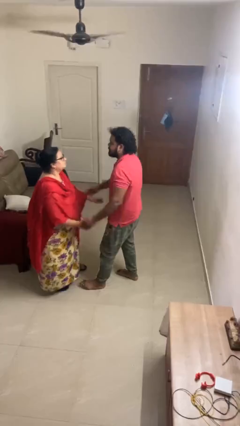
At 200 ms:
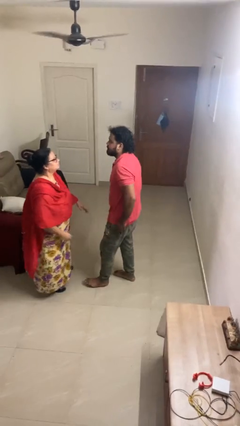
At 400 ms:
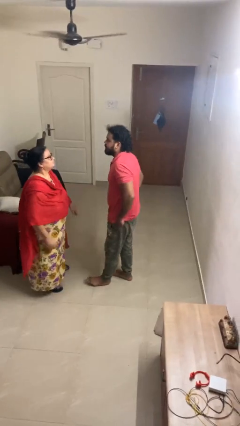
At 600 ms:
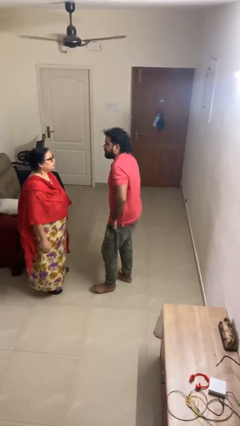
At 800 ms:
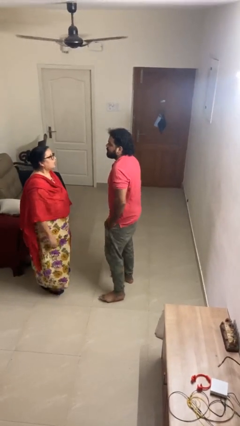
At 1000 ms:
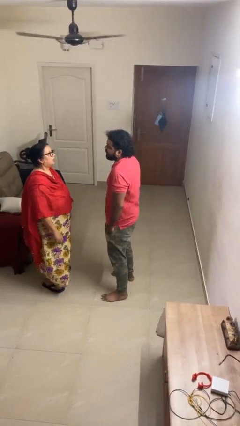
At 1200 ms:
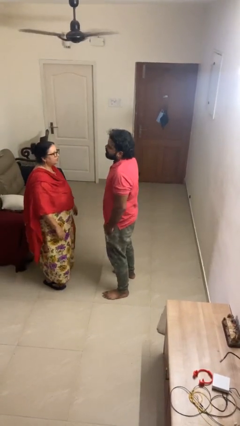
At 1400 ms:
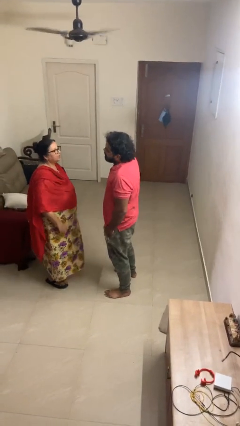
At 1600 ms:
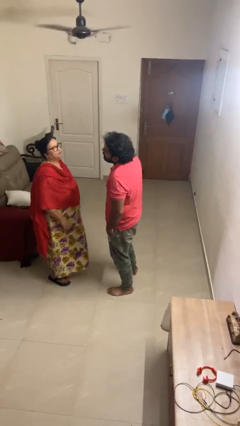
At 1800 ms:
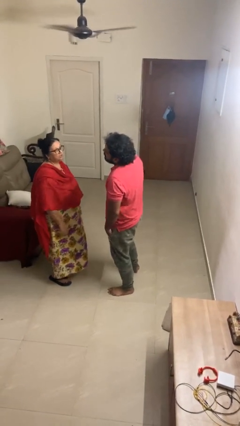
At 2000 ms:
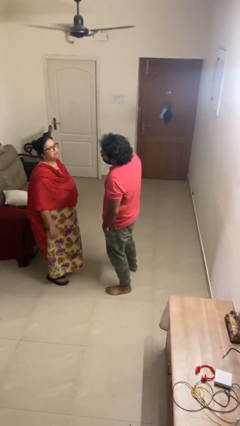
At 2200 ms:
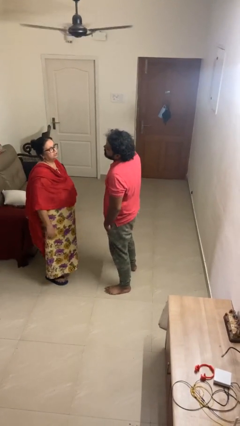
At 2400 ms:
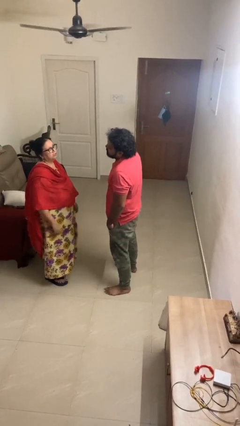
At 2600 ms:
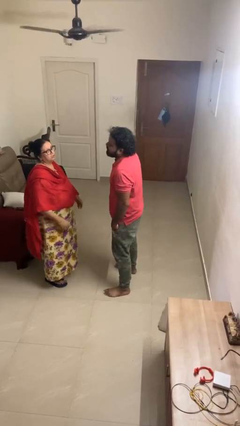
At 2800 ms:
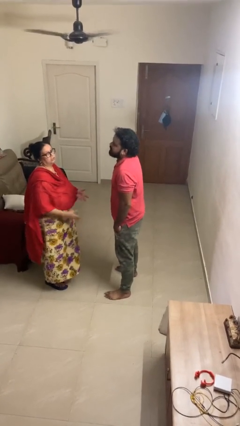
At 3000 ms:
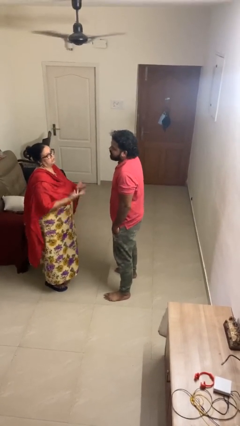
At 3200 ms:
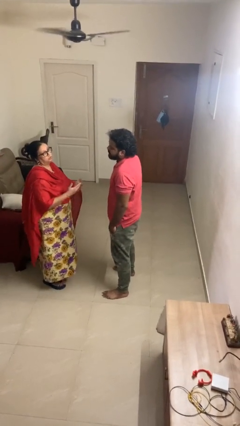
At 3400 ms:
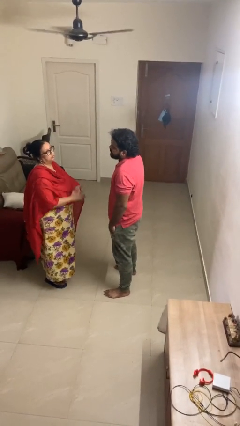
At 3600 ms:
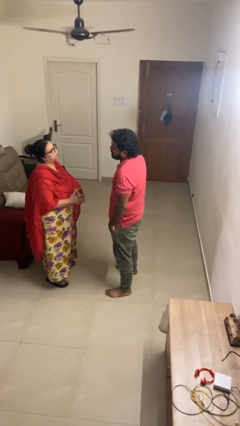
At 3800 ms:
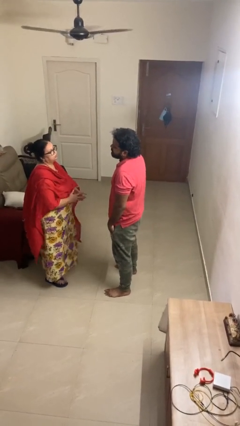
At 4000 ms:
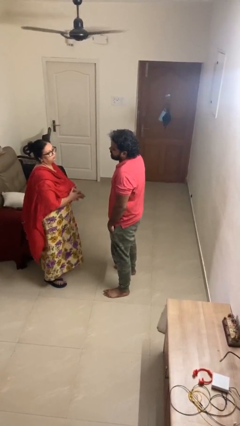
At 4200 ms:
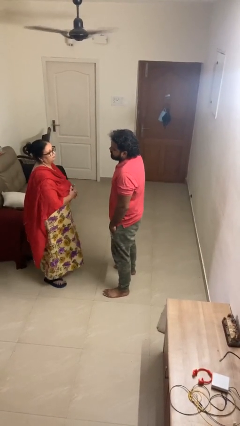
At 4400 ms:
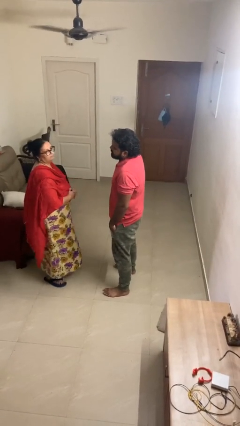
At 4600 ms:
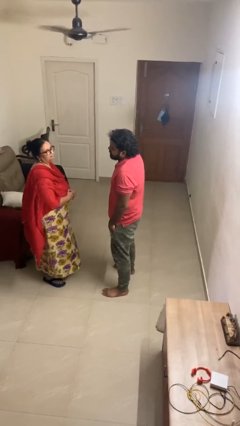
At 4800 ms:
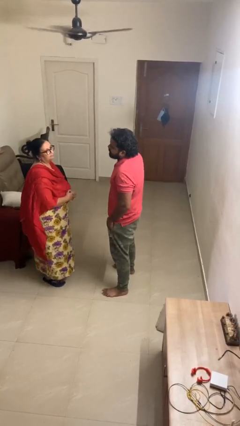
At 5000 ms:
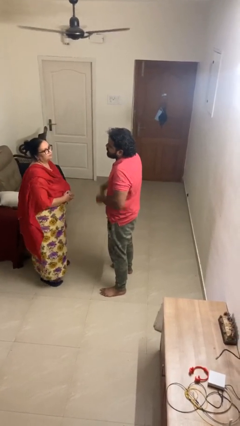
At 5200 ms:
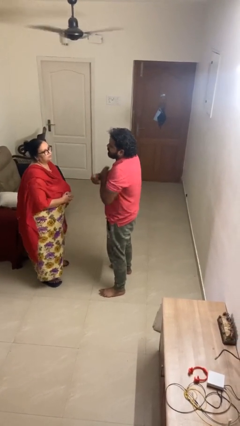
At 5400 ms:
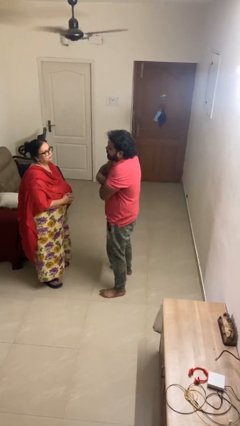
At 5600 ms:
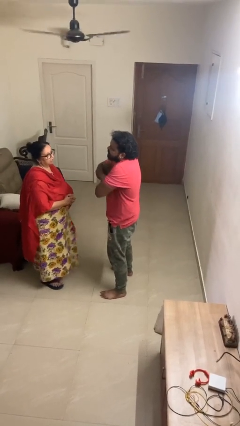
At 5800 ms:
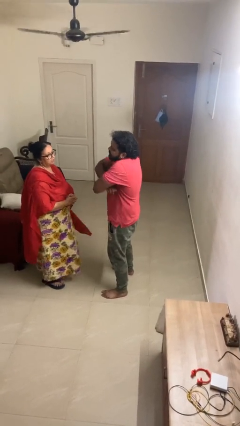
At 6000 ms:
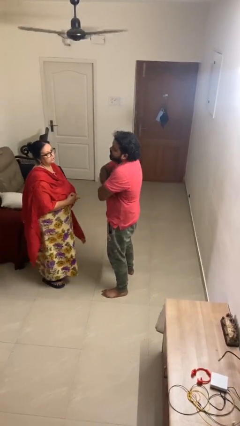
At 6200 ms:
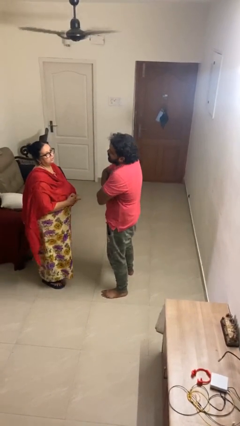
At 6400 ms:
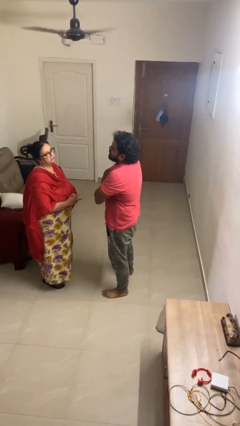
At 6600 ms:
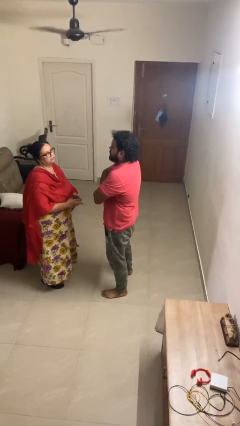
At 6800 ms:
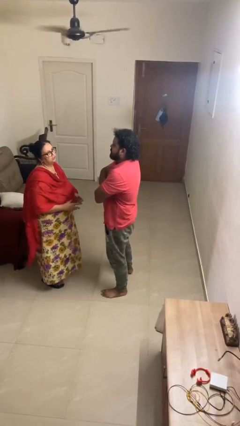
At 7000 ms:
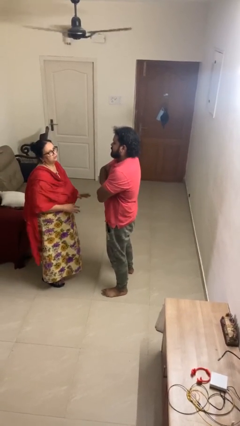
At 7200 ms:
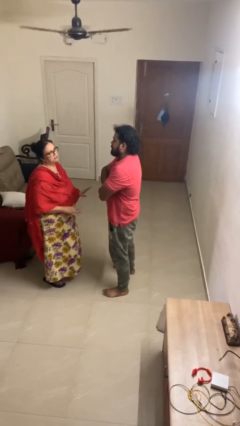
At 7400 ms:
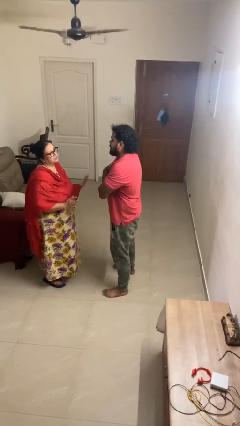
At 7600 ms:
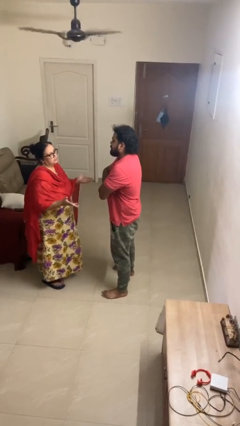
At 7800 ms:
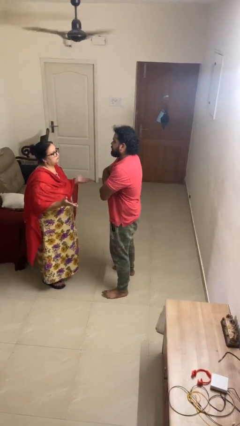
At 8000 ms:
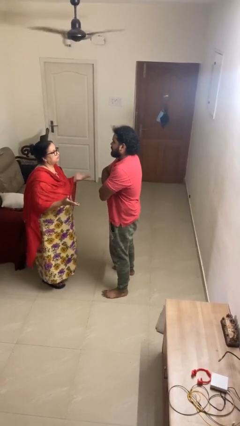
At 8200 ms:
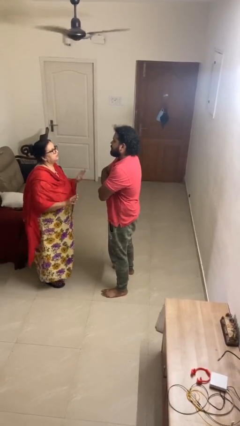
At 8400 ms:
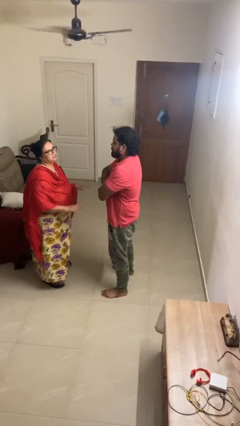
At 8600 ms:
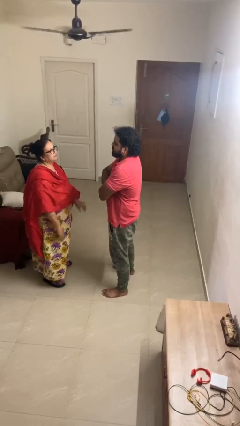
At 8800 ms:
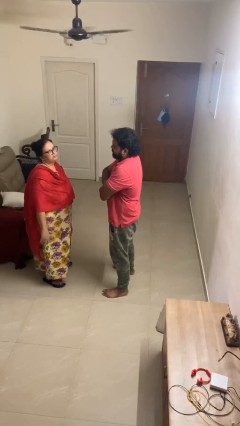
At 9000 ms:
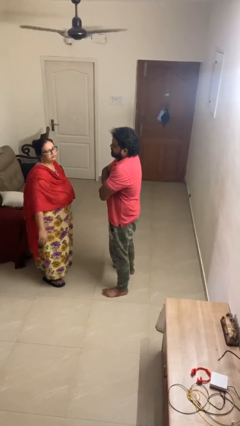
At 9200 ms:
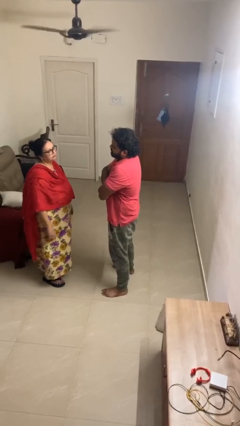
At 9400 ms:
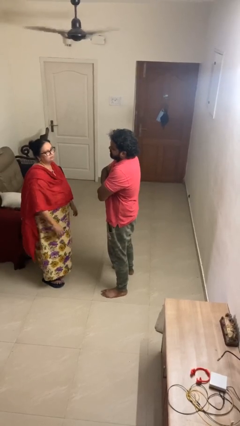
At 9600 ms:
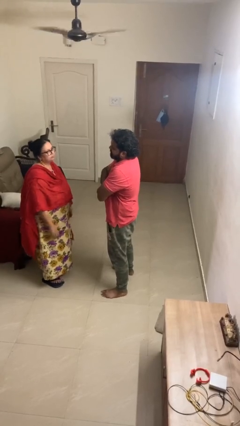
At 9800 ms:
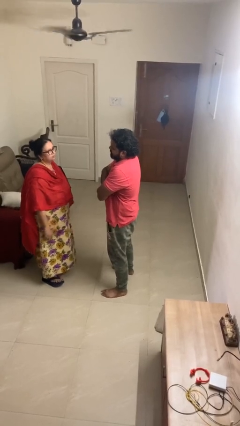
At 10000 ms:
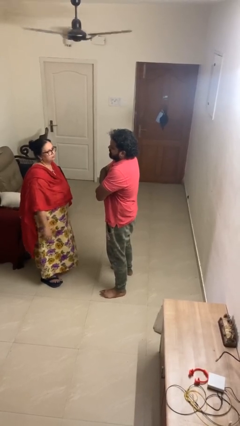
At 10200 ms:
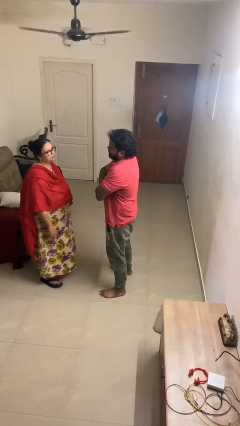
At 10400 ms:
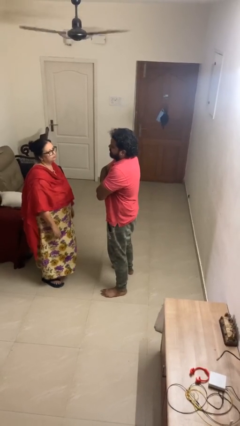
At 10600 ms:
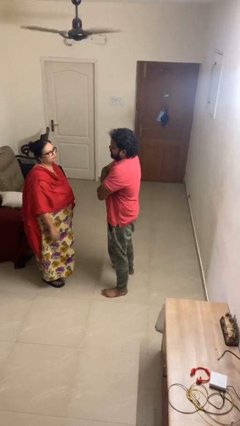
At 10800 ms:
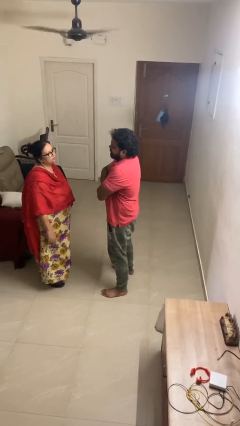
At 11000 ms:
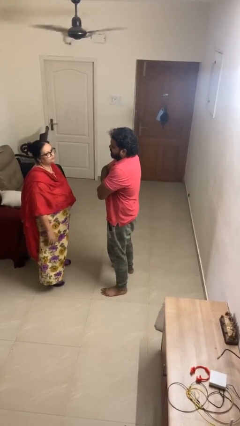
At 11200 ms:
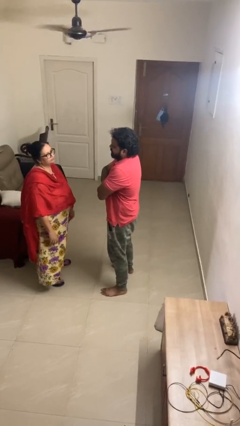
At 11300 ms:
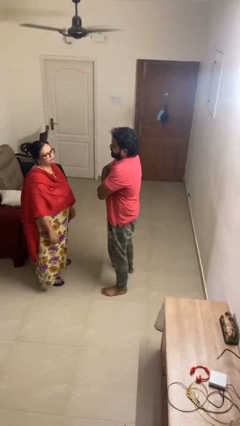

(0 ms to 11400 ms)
person talks to person

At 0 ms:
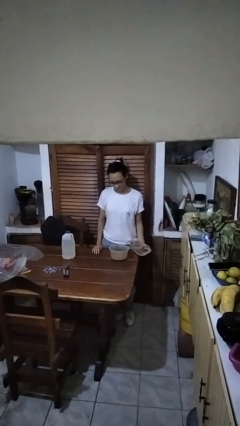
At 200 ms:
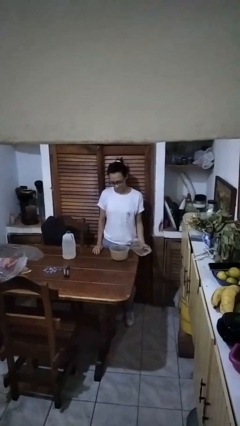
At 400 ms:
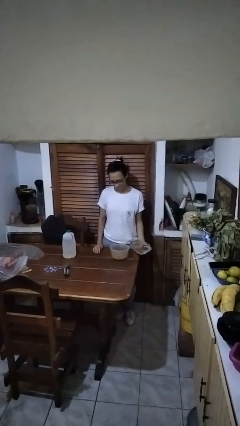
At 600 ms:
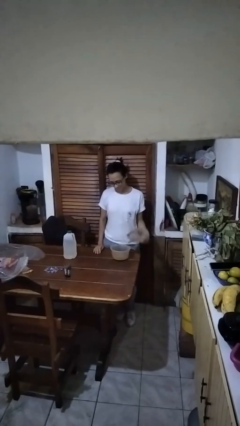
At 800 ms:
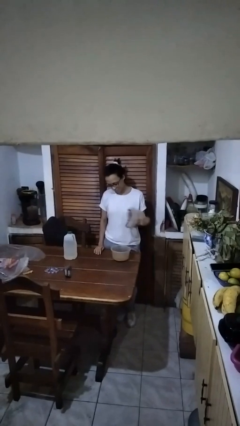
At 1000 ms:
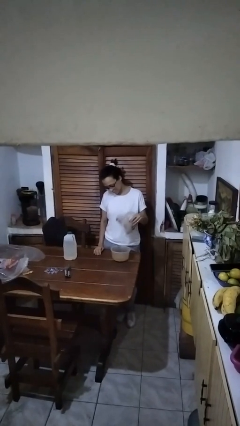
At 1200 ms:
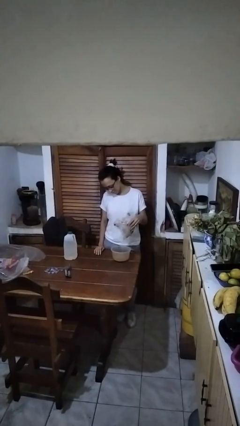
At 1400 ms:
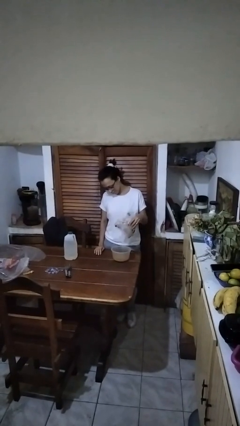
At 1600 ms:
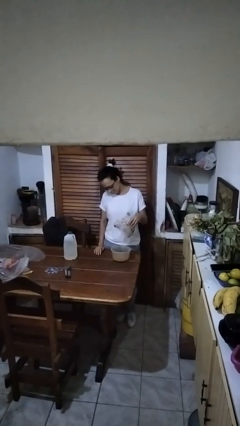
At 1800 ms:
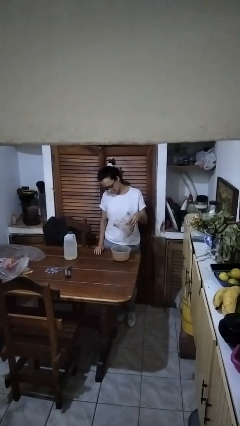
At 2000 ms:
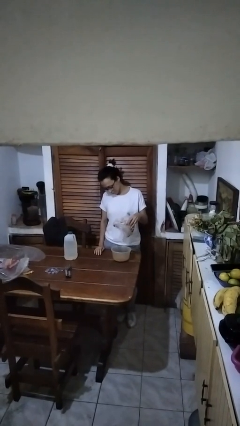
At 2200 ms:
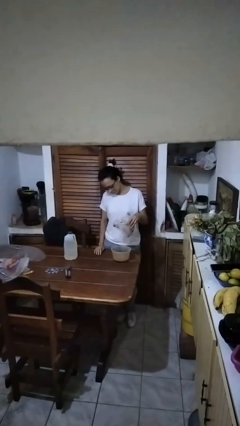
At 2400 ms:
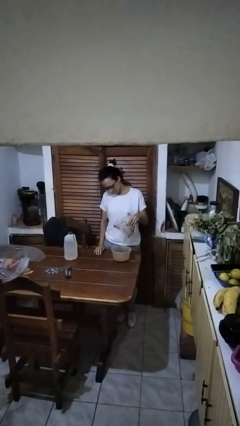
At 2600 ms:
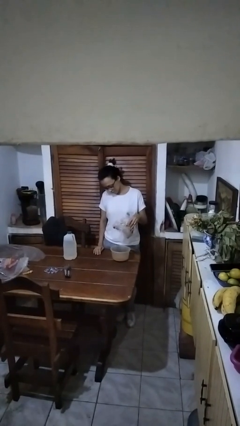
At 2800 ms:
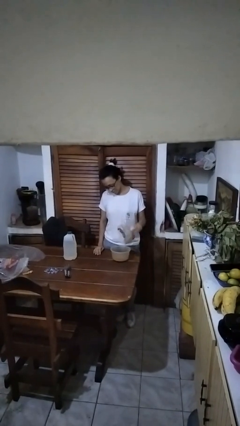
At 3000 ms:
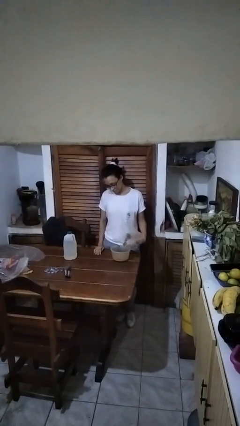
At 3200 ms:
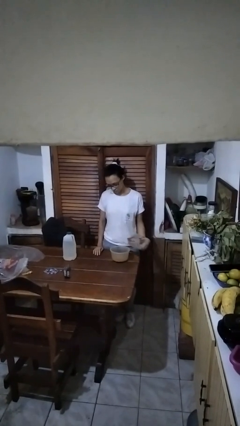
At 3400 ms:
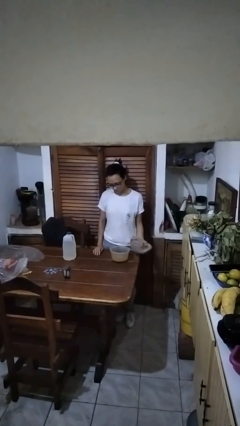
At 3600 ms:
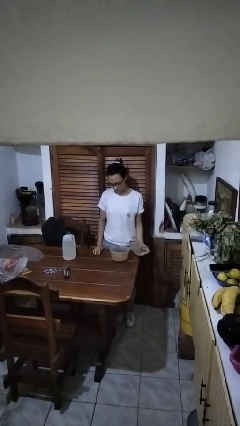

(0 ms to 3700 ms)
person pours into bowl

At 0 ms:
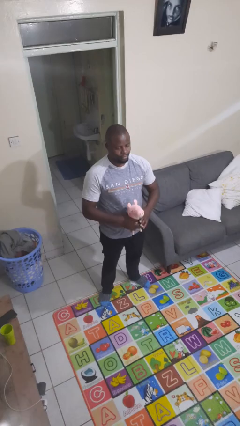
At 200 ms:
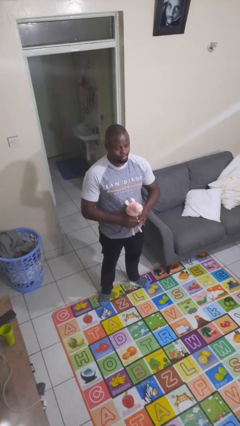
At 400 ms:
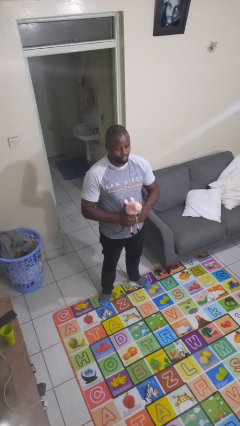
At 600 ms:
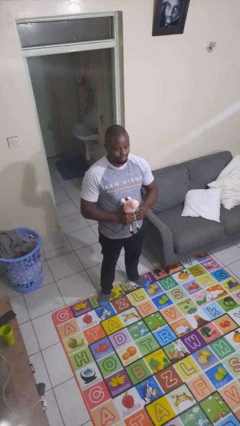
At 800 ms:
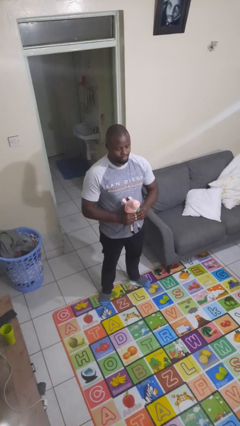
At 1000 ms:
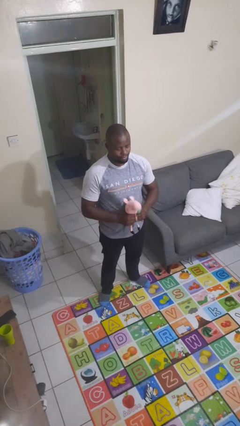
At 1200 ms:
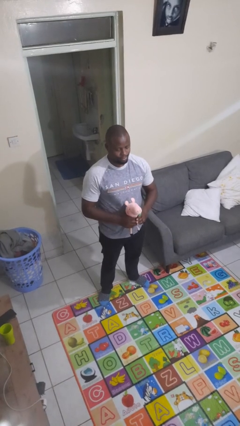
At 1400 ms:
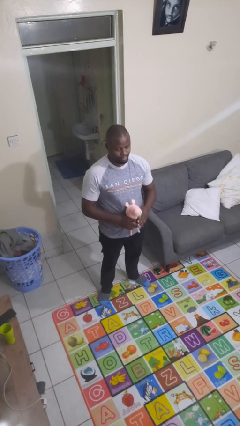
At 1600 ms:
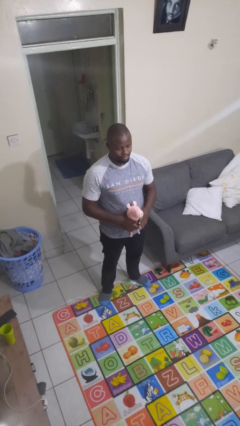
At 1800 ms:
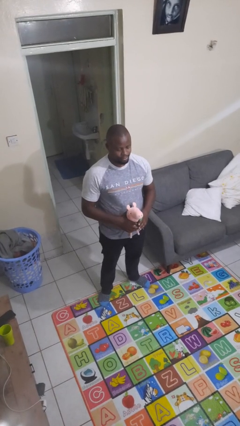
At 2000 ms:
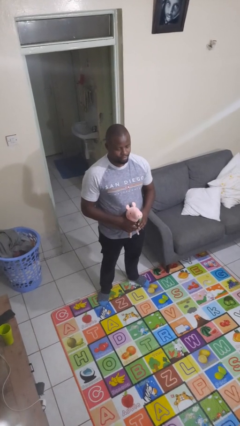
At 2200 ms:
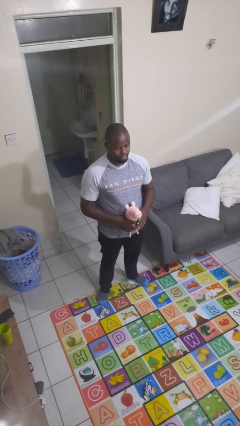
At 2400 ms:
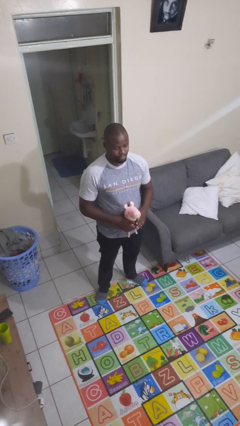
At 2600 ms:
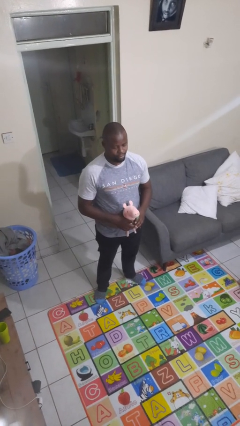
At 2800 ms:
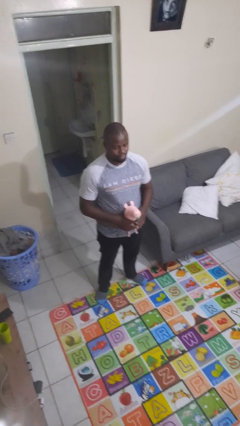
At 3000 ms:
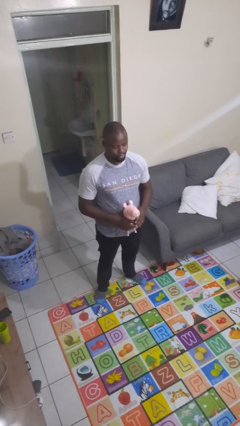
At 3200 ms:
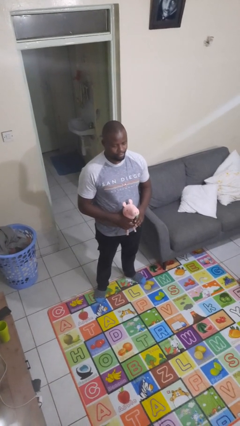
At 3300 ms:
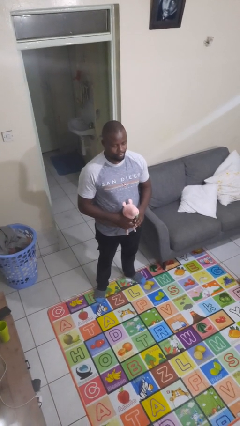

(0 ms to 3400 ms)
person squeezes object
